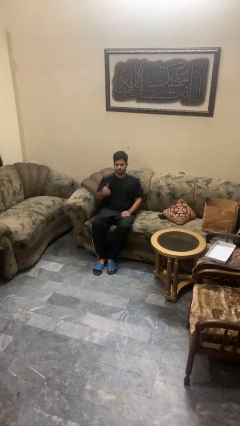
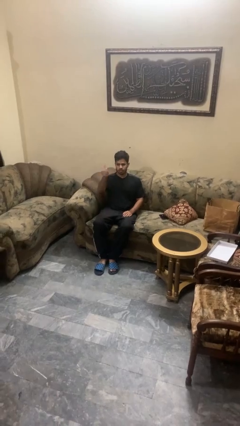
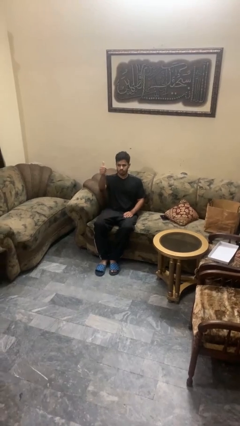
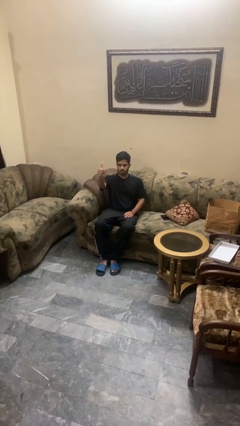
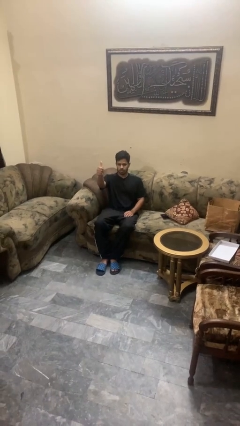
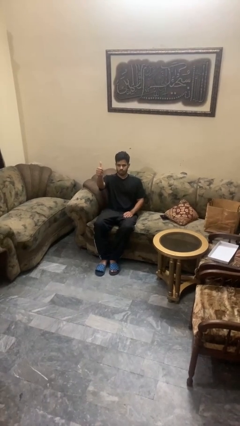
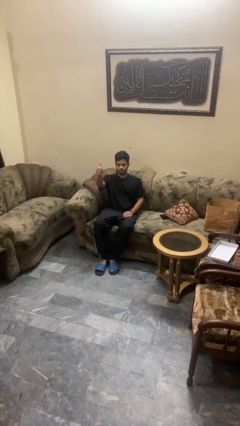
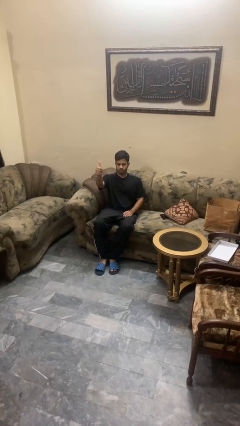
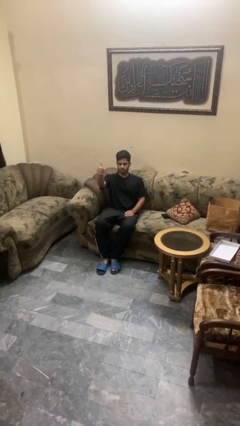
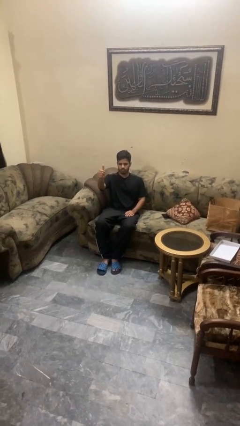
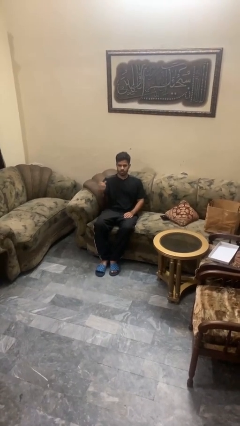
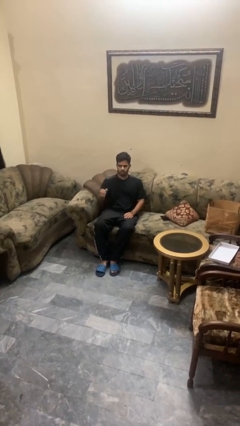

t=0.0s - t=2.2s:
person gestures thumbs up

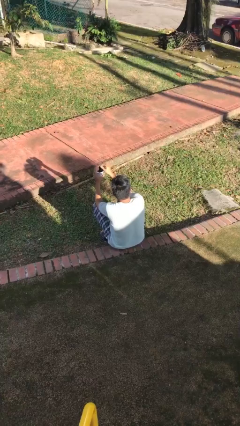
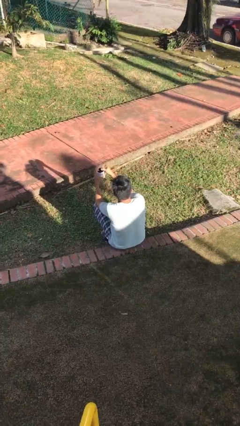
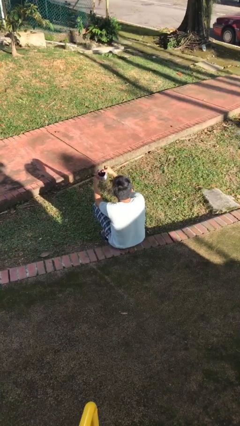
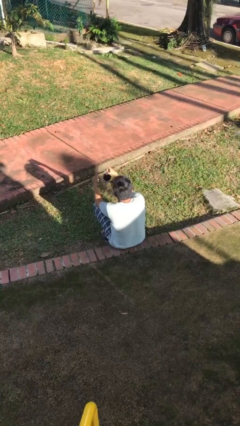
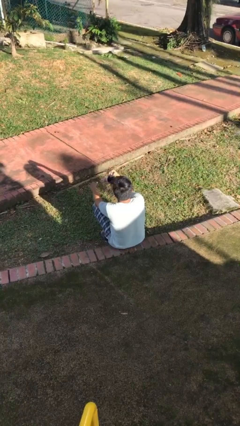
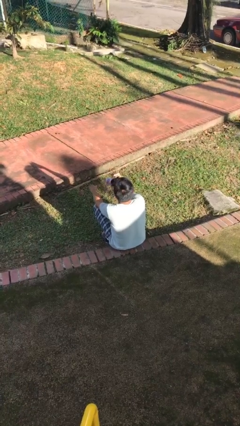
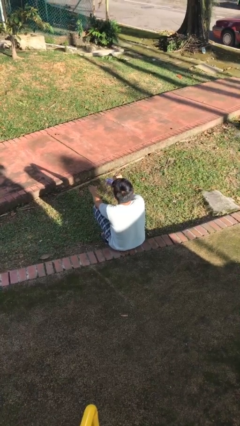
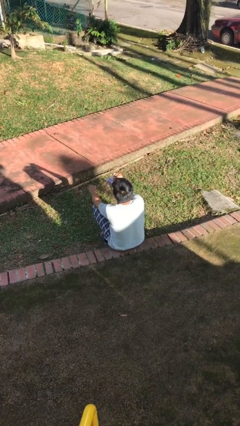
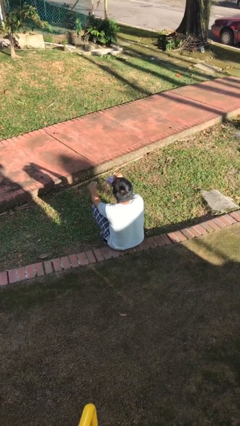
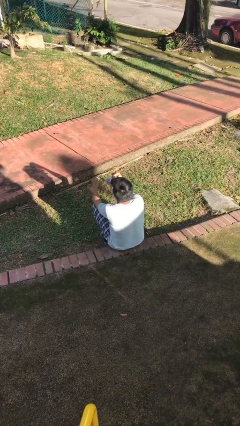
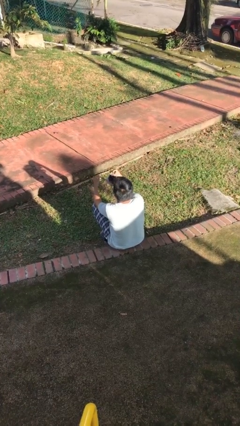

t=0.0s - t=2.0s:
person drinks from mug

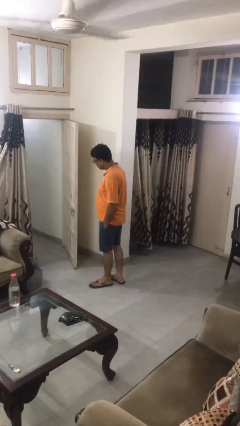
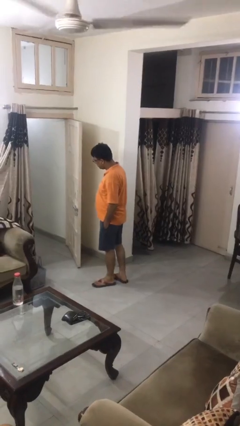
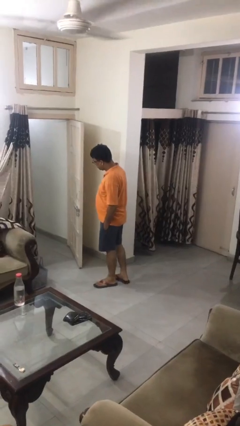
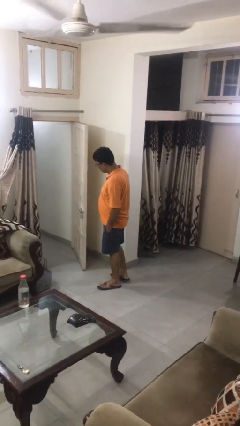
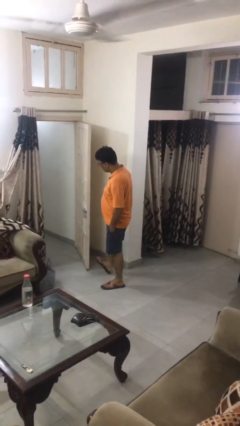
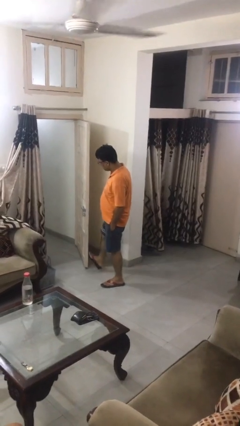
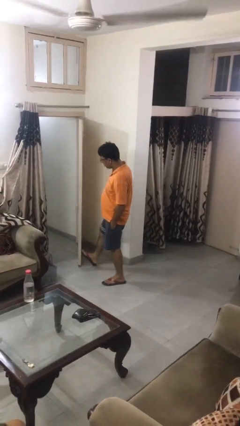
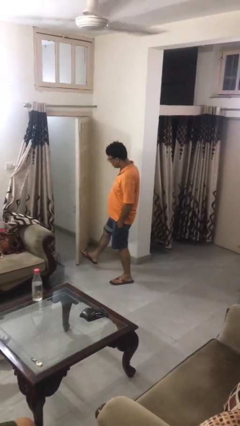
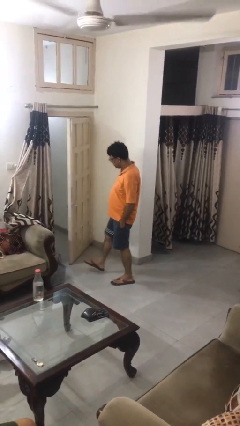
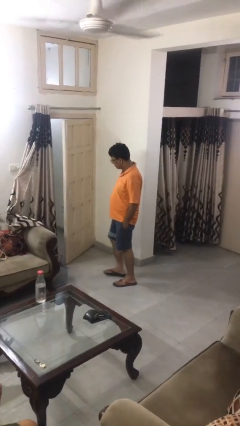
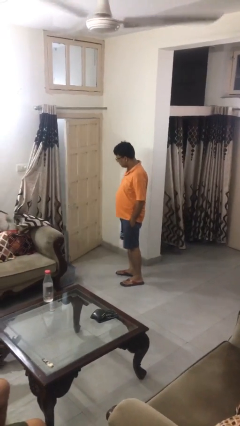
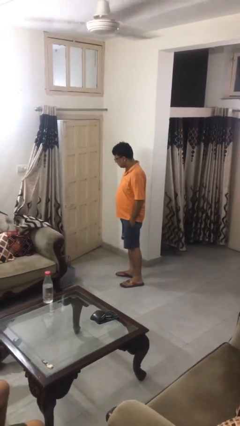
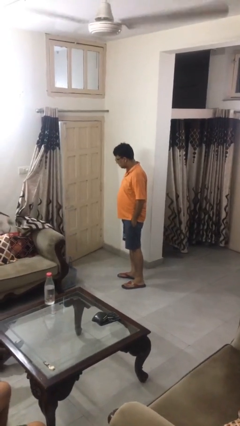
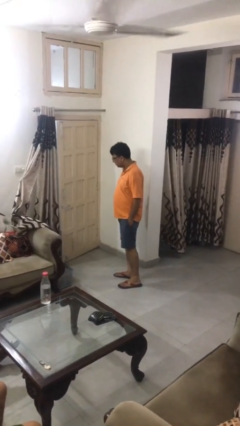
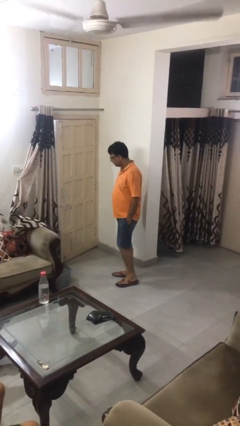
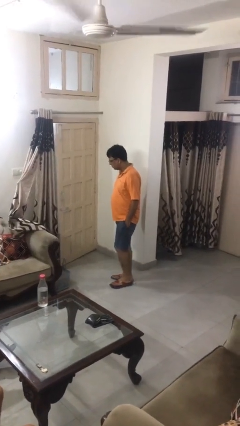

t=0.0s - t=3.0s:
person closes door with foot

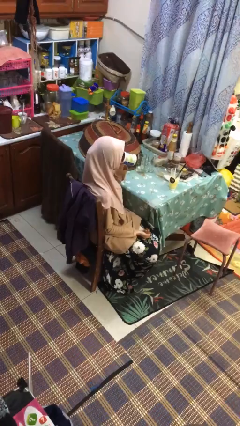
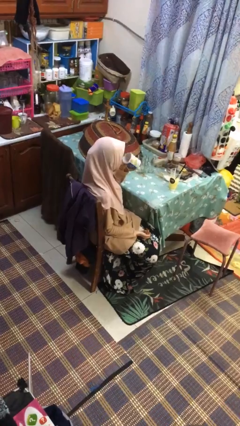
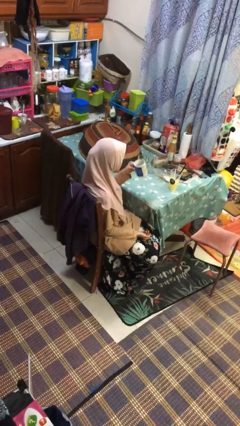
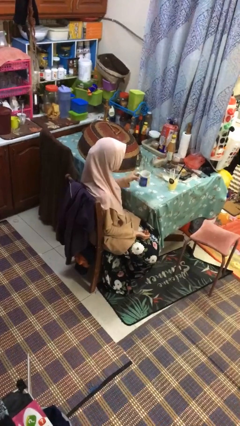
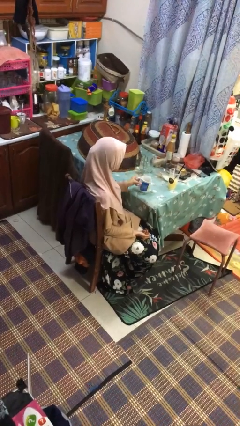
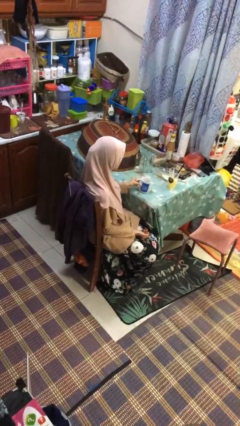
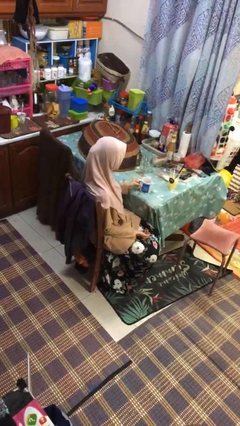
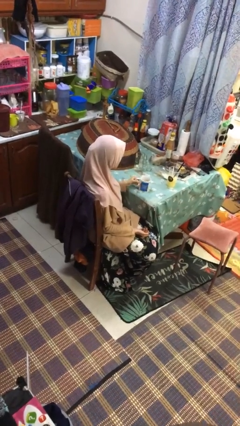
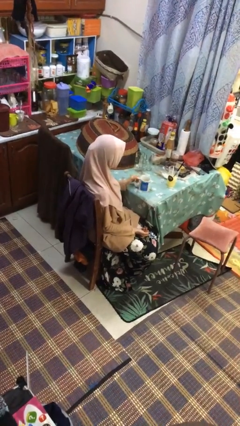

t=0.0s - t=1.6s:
person puts down object on table

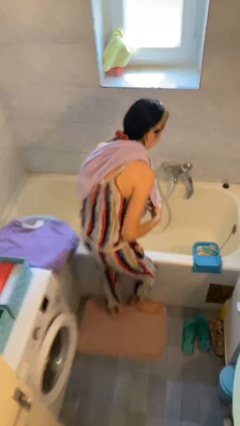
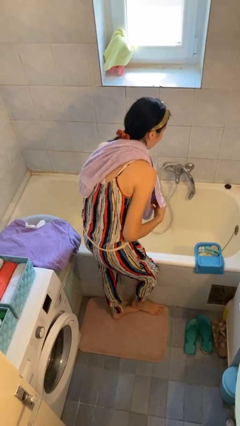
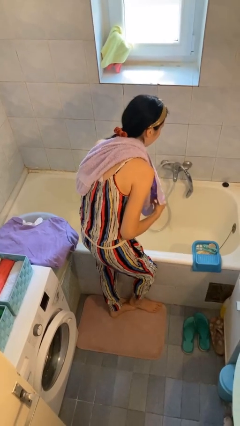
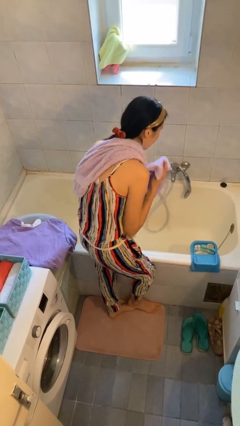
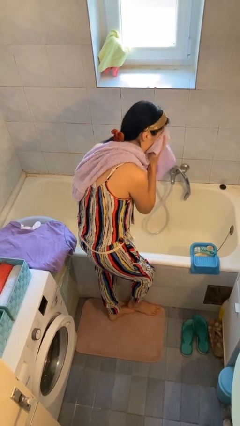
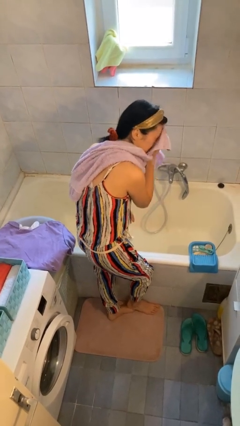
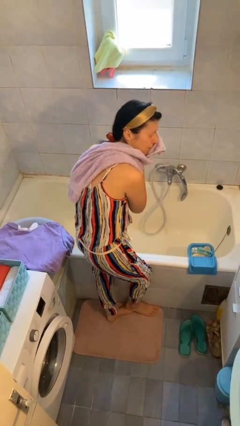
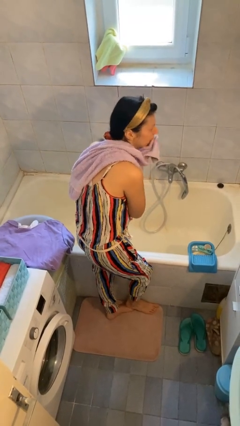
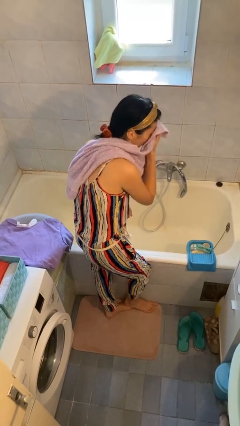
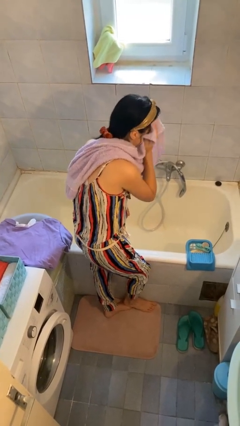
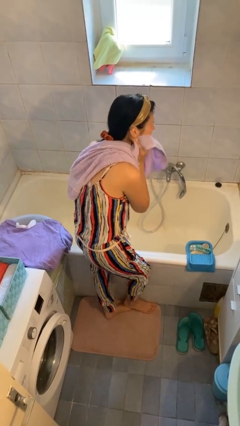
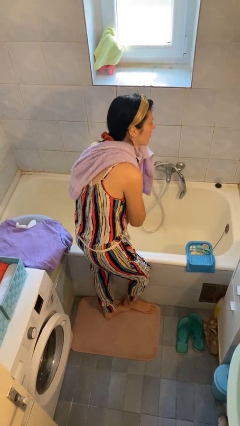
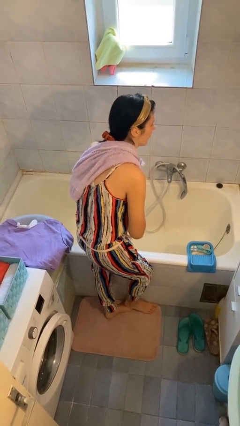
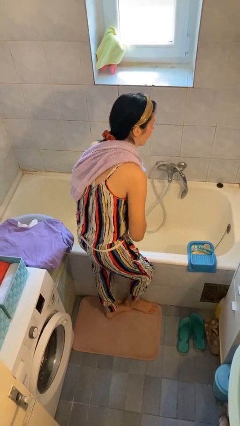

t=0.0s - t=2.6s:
person dries face with towel

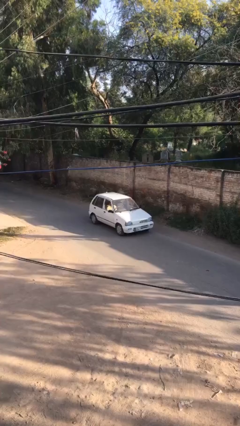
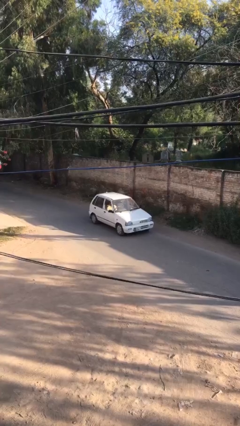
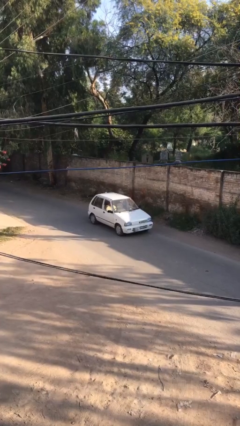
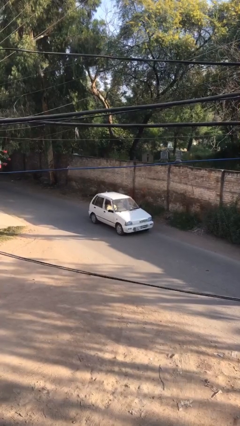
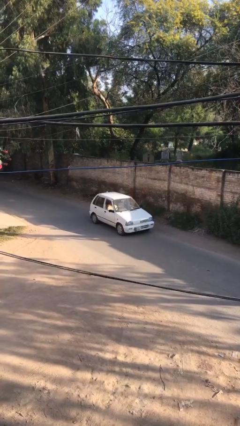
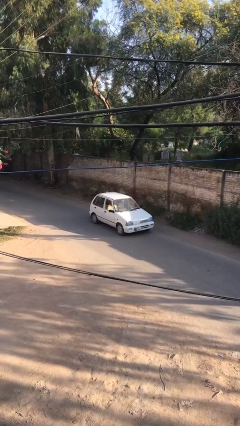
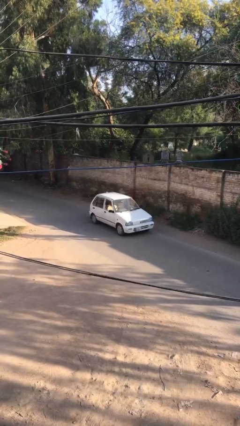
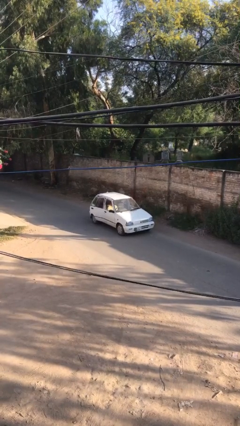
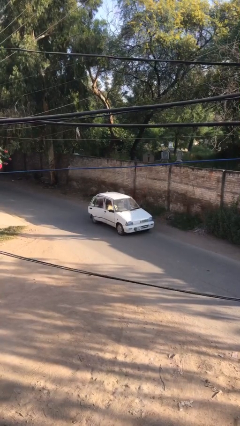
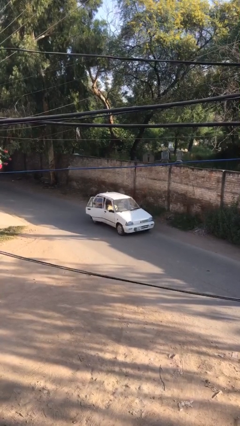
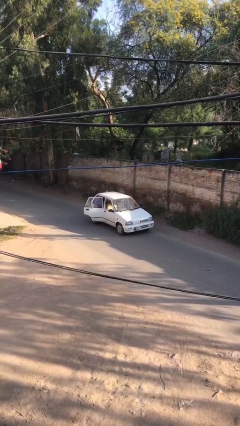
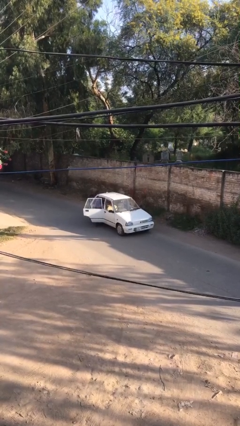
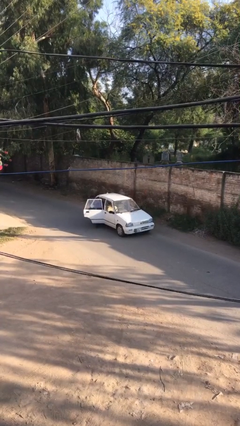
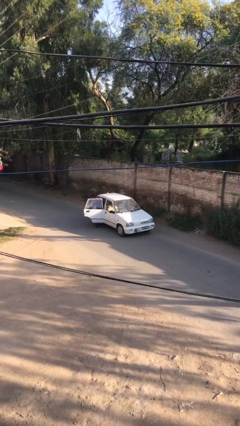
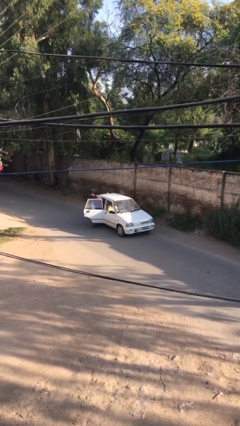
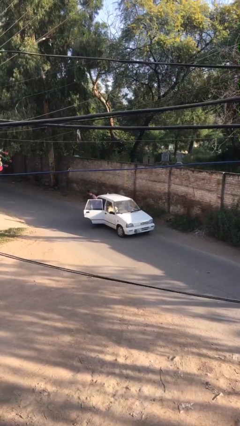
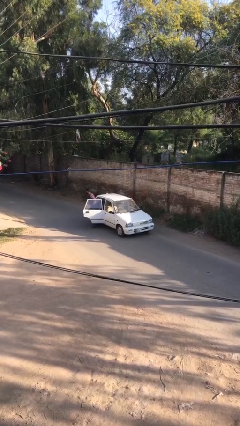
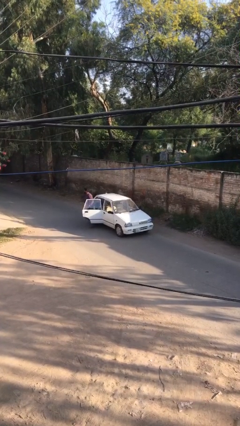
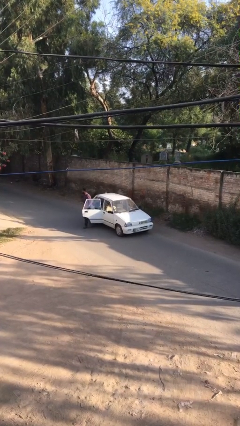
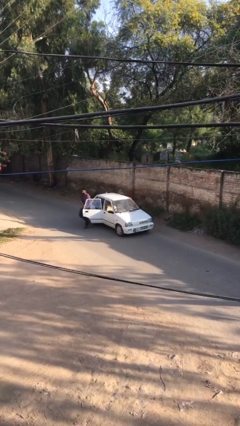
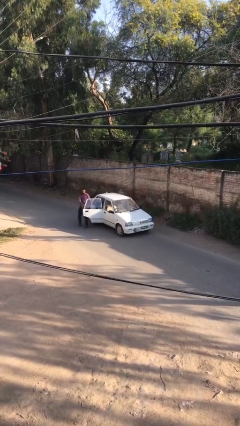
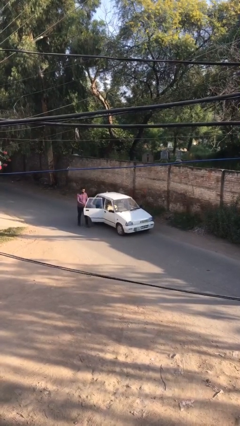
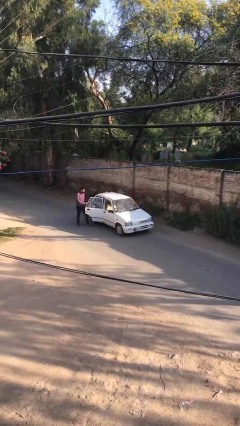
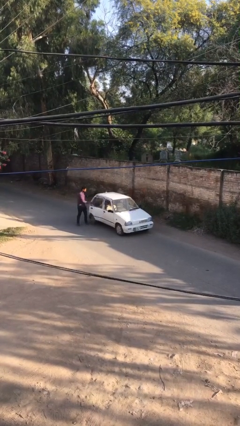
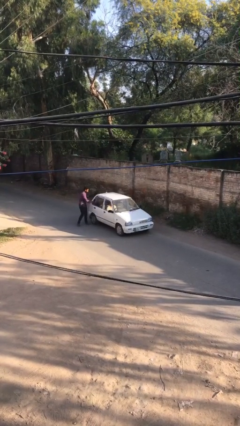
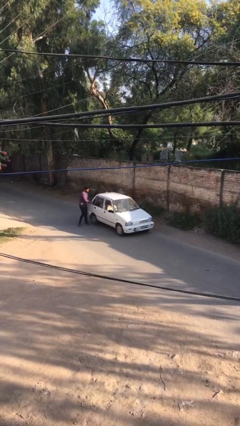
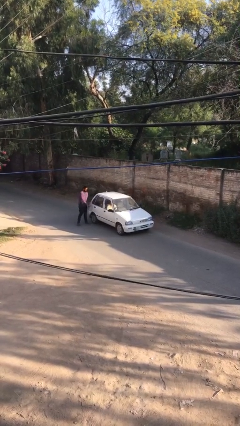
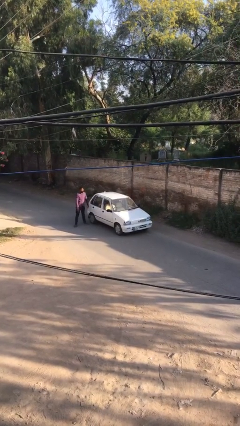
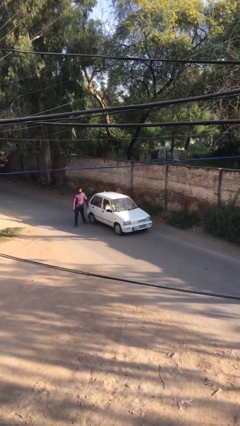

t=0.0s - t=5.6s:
car drops off person
